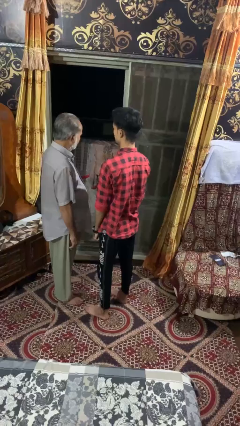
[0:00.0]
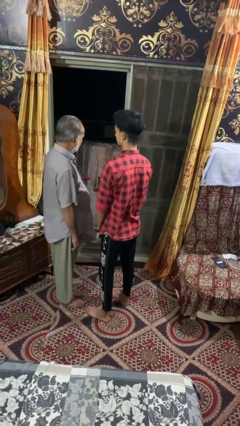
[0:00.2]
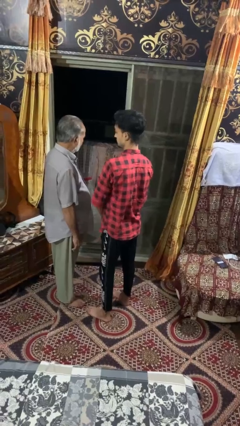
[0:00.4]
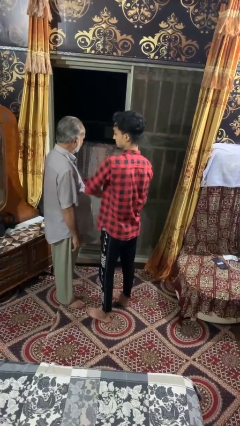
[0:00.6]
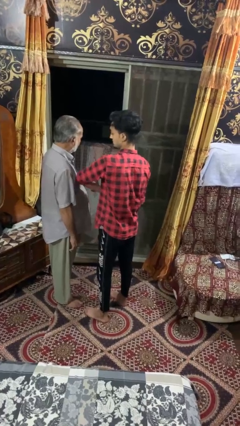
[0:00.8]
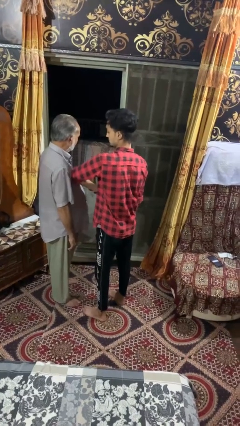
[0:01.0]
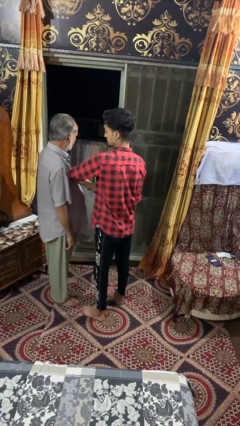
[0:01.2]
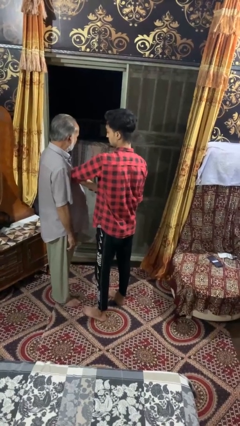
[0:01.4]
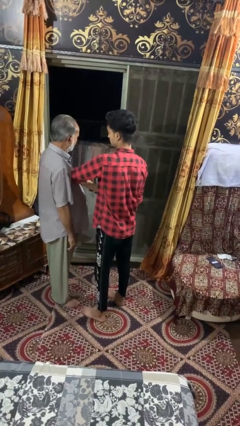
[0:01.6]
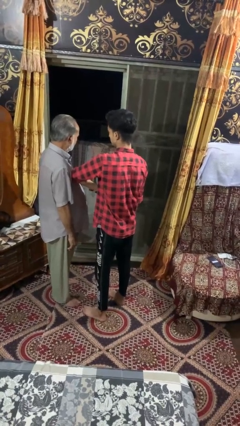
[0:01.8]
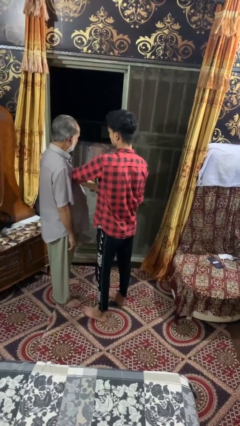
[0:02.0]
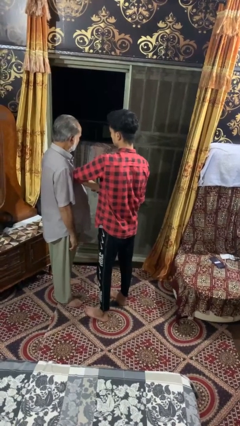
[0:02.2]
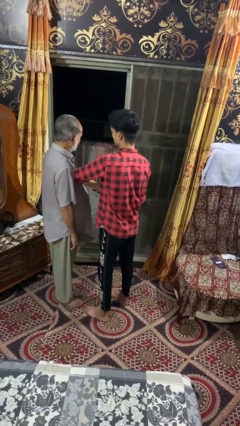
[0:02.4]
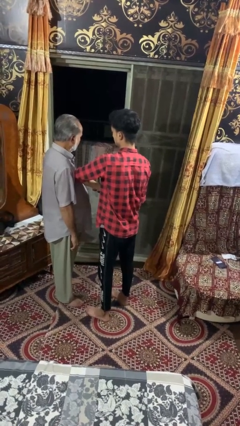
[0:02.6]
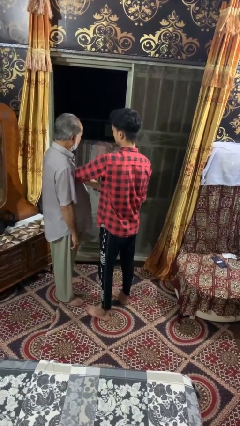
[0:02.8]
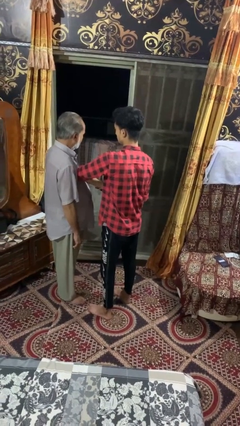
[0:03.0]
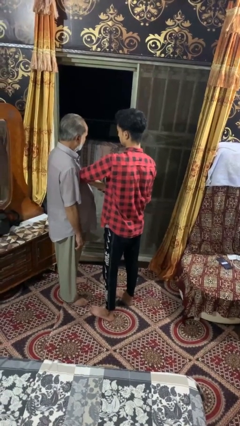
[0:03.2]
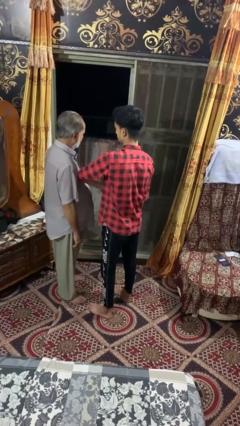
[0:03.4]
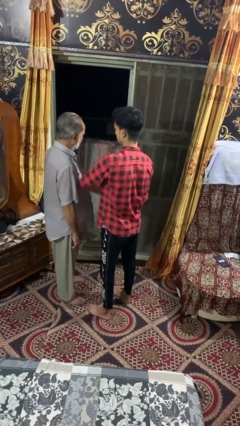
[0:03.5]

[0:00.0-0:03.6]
person nudges person with elbow

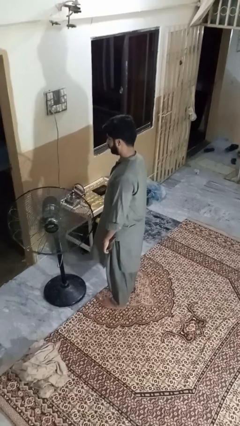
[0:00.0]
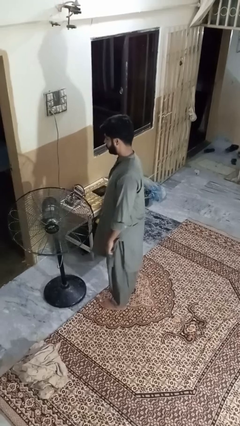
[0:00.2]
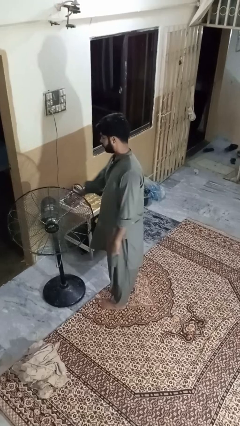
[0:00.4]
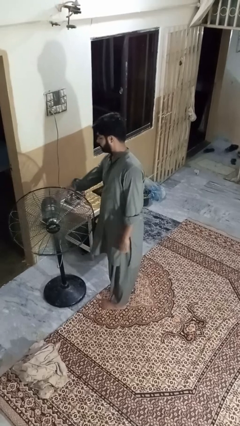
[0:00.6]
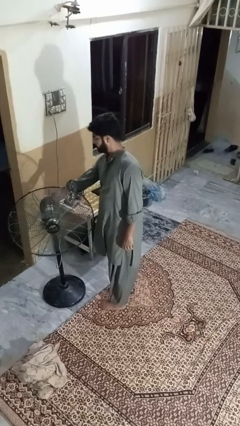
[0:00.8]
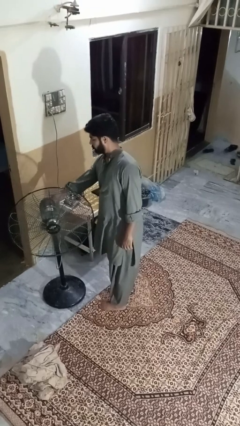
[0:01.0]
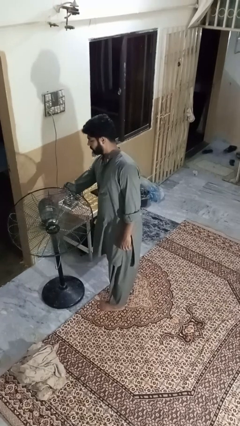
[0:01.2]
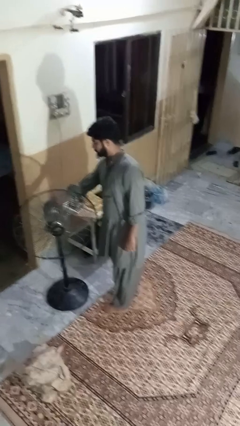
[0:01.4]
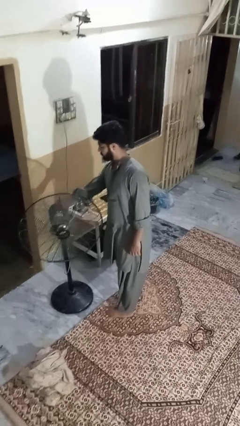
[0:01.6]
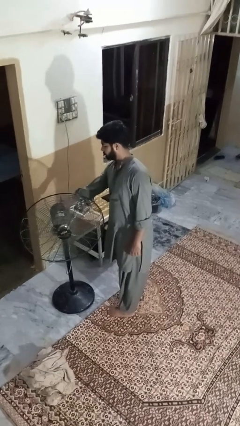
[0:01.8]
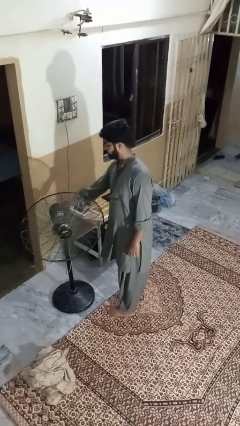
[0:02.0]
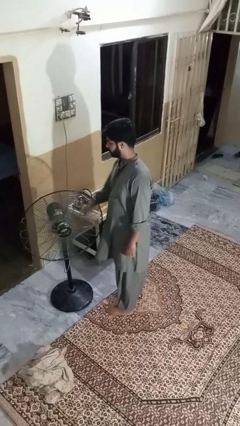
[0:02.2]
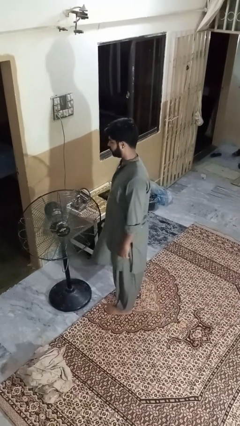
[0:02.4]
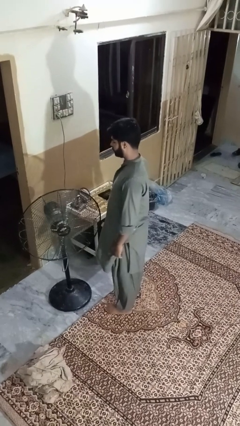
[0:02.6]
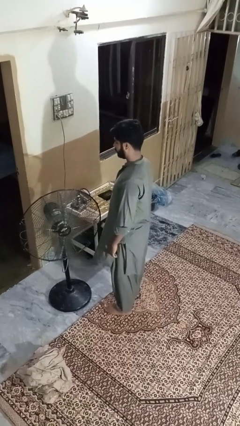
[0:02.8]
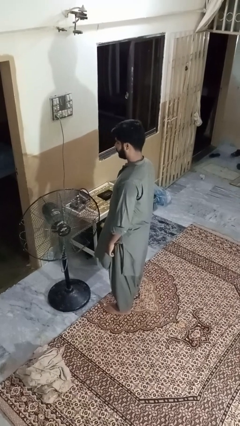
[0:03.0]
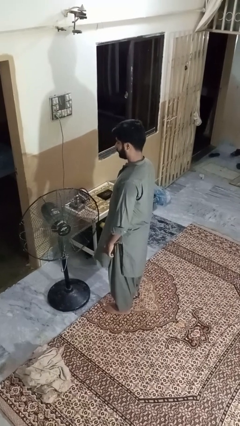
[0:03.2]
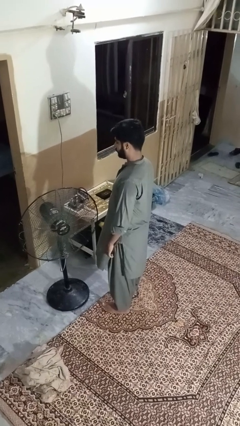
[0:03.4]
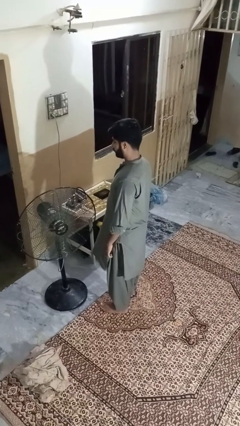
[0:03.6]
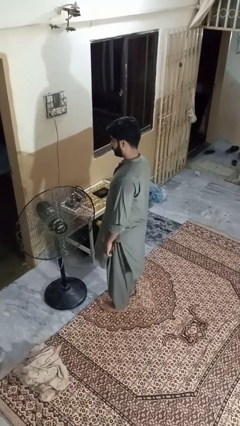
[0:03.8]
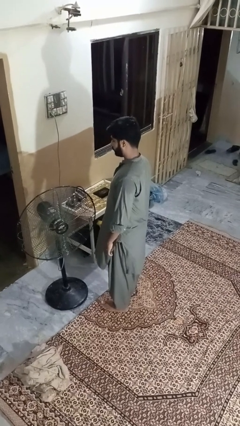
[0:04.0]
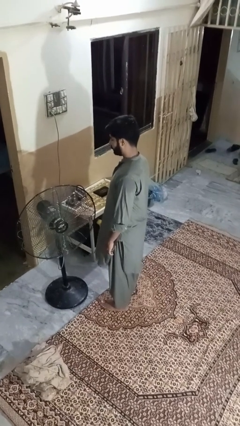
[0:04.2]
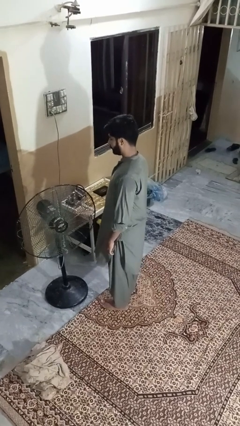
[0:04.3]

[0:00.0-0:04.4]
person turns on fan

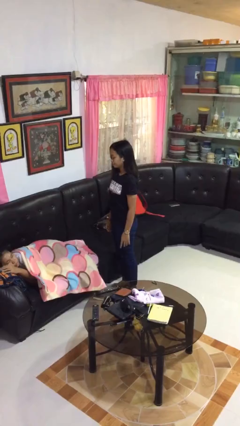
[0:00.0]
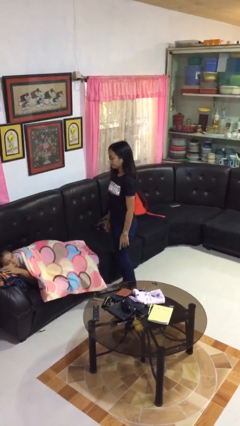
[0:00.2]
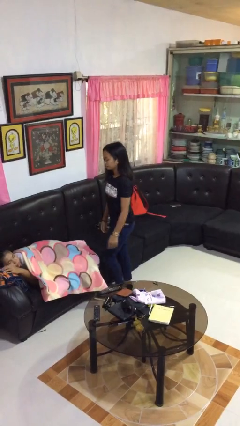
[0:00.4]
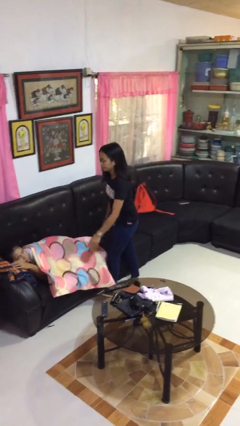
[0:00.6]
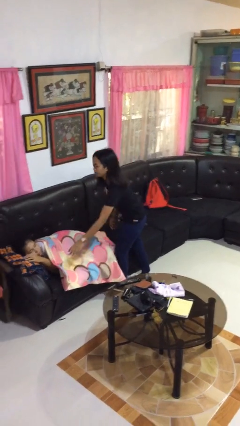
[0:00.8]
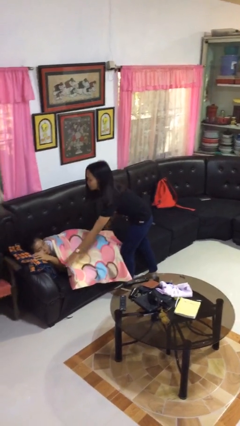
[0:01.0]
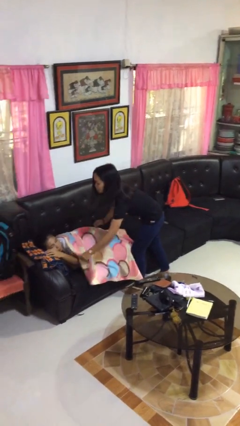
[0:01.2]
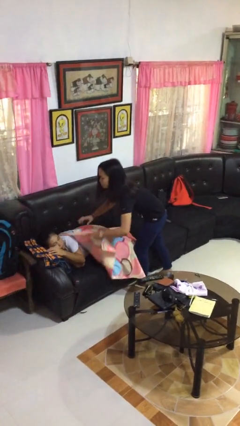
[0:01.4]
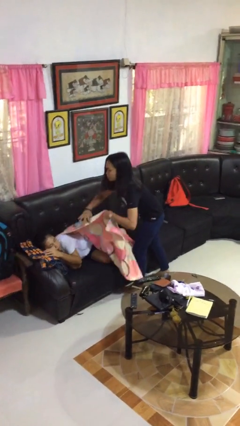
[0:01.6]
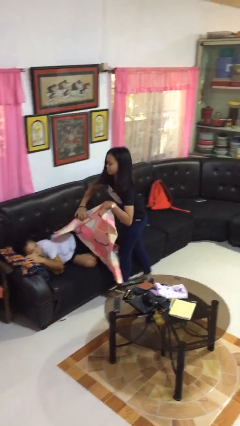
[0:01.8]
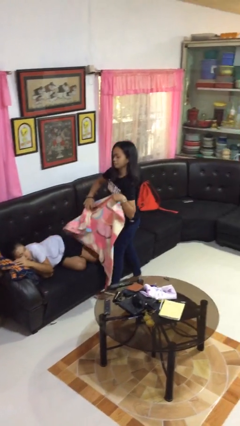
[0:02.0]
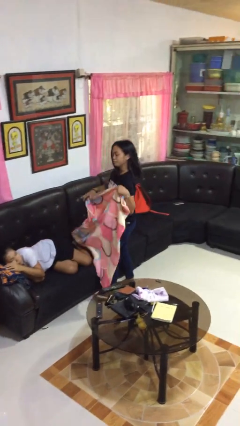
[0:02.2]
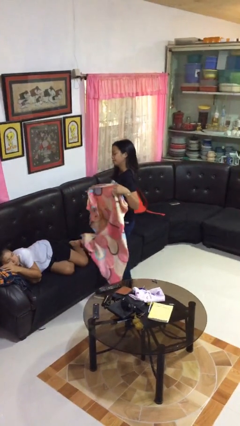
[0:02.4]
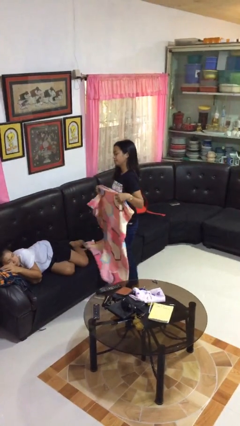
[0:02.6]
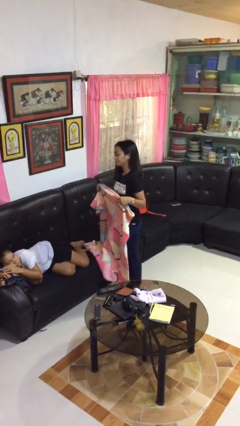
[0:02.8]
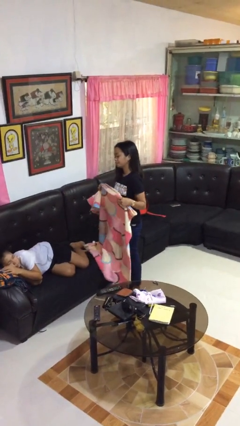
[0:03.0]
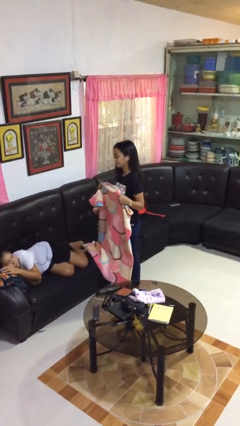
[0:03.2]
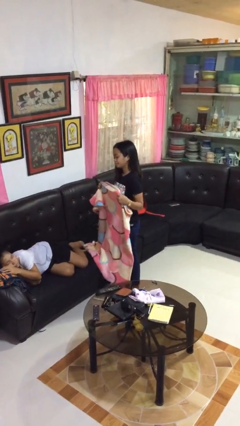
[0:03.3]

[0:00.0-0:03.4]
person uncovers friend with blanket

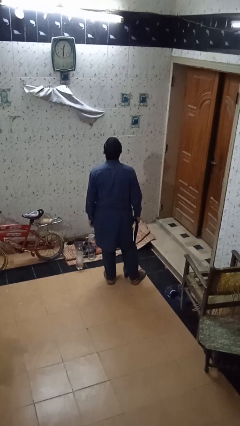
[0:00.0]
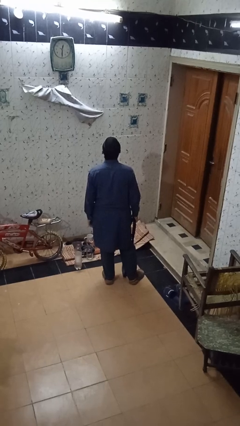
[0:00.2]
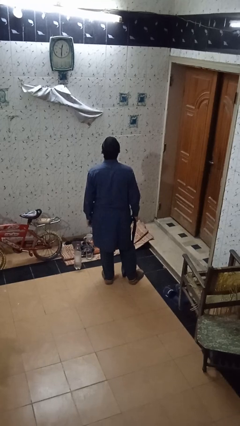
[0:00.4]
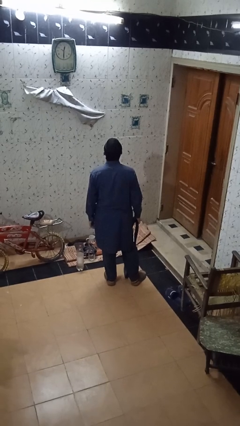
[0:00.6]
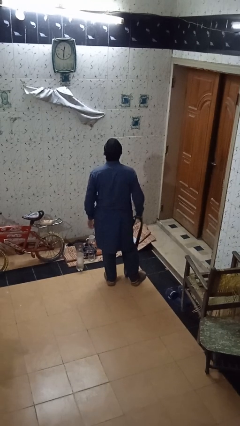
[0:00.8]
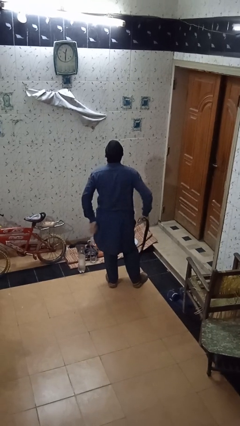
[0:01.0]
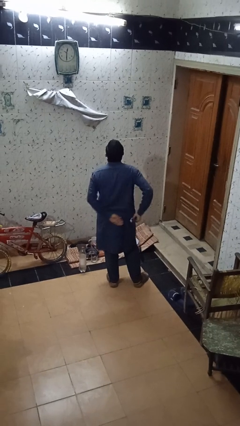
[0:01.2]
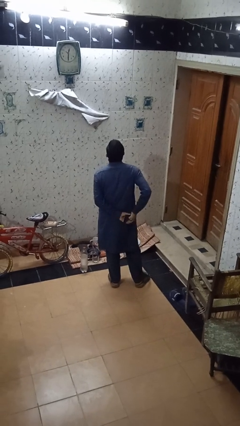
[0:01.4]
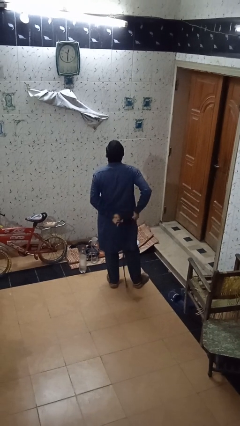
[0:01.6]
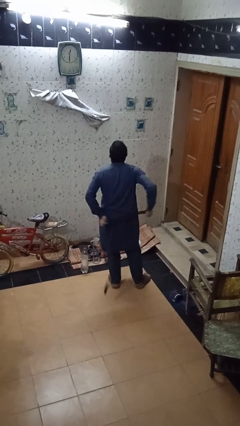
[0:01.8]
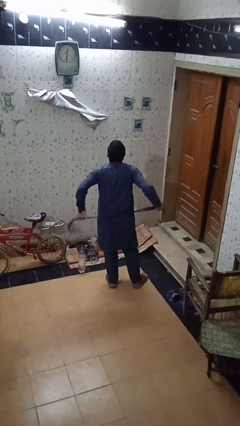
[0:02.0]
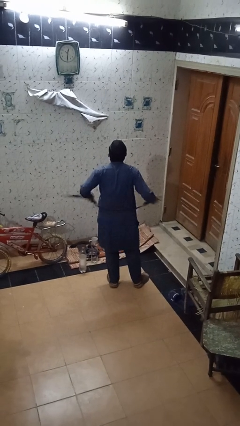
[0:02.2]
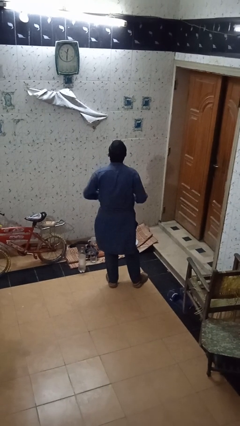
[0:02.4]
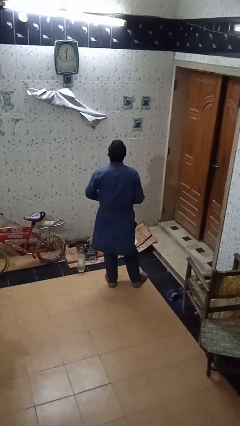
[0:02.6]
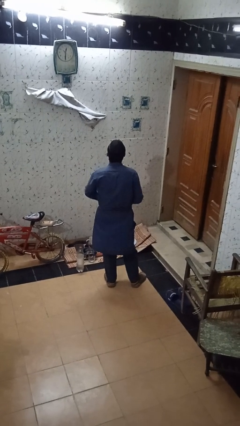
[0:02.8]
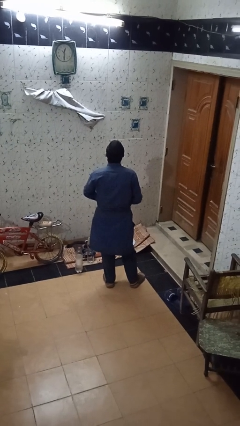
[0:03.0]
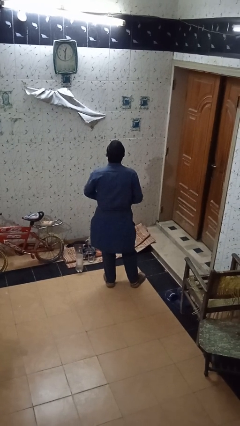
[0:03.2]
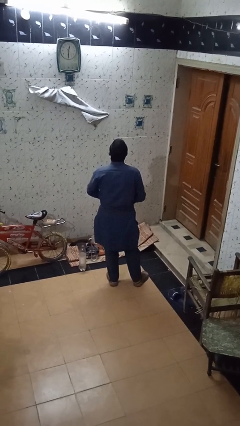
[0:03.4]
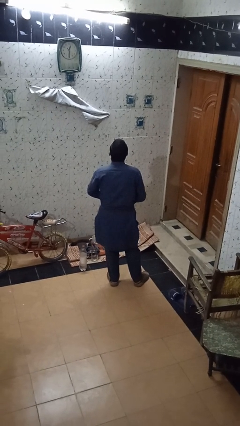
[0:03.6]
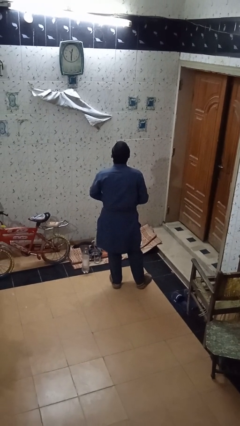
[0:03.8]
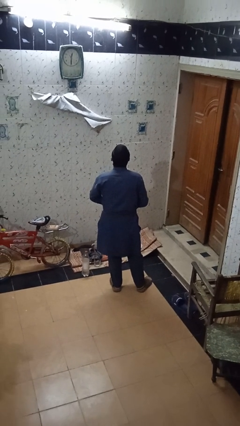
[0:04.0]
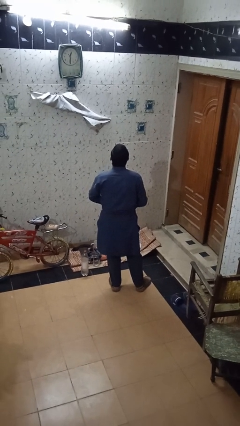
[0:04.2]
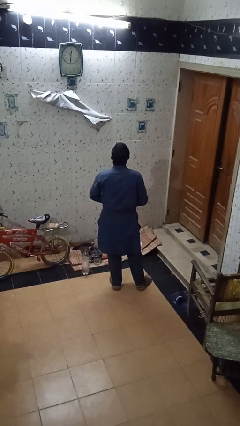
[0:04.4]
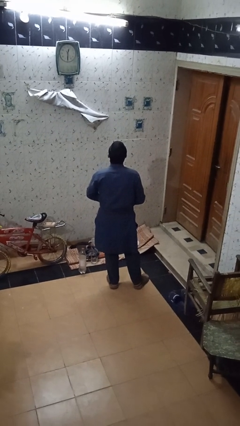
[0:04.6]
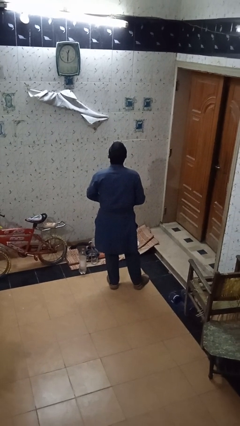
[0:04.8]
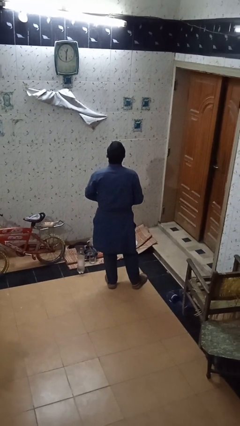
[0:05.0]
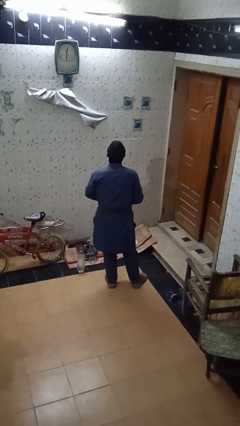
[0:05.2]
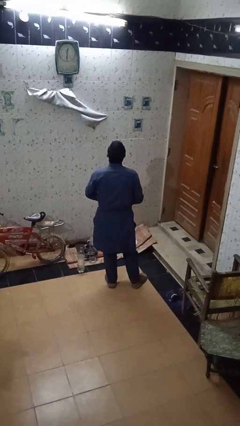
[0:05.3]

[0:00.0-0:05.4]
person puts on belt

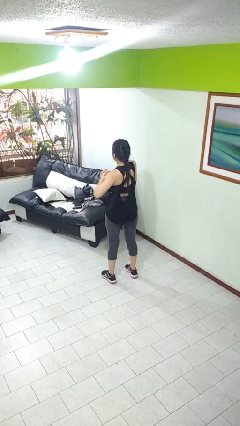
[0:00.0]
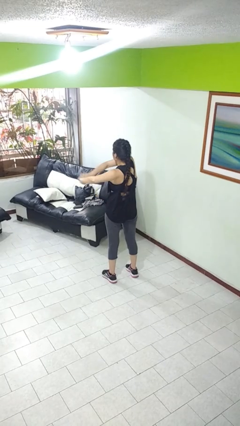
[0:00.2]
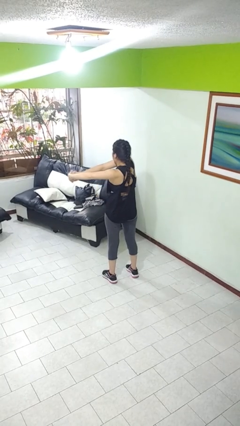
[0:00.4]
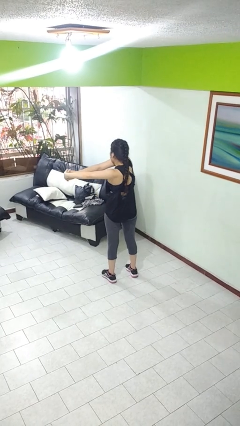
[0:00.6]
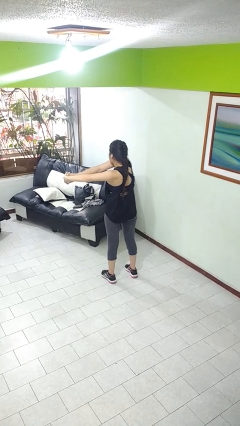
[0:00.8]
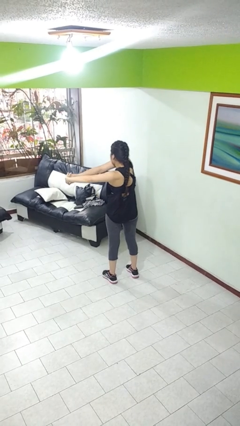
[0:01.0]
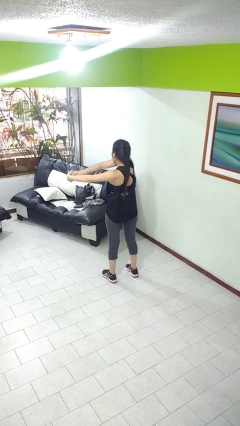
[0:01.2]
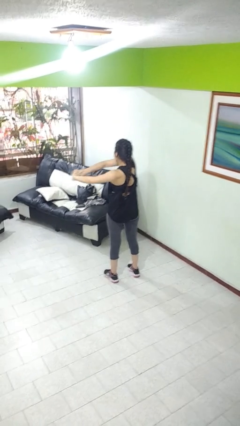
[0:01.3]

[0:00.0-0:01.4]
person stretches arms to side
